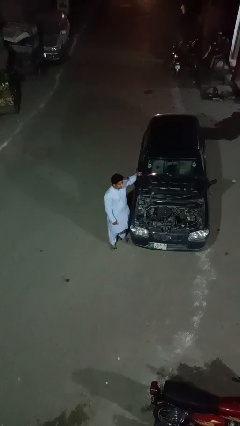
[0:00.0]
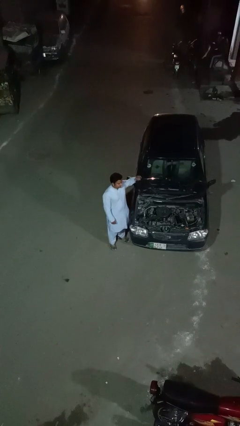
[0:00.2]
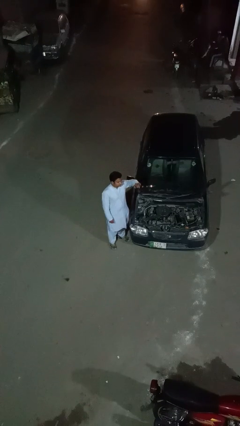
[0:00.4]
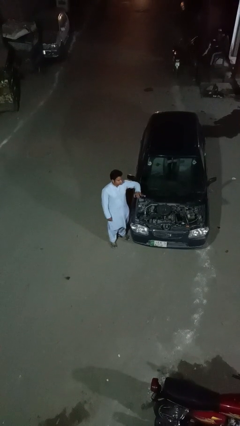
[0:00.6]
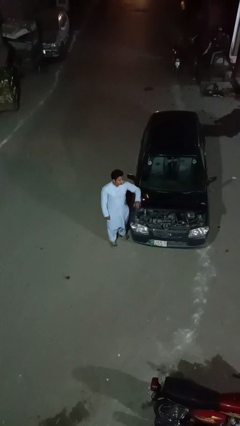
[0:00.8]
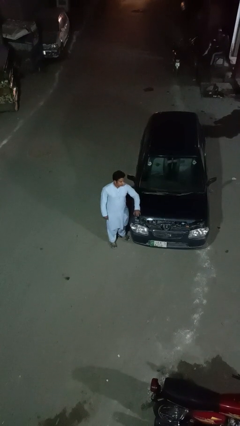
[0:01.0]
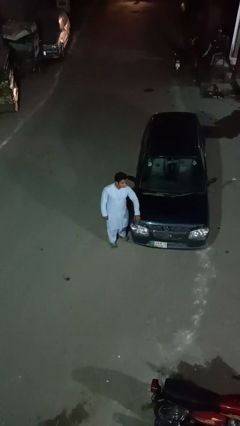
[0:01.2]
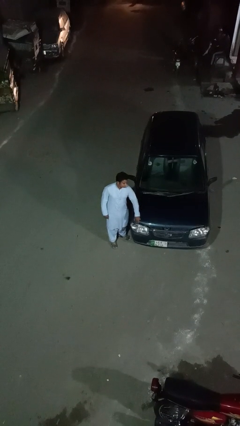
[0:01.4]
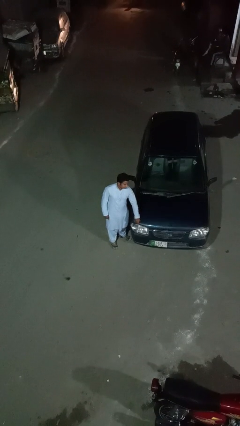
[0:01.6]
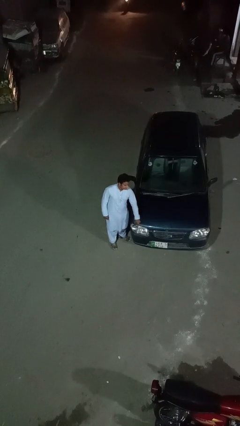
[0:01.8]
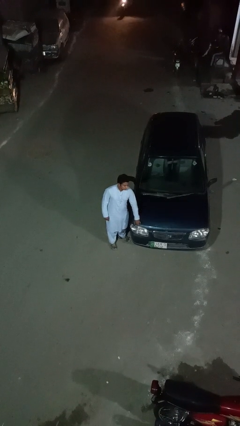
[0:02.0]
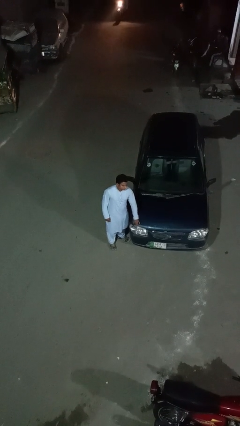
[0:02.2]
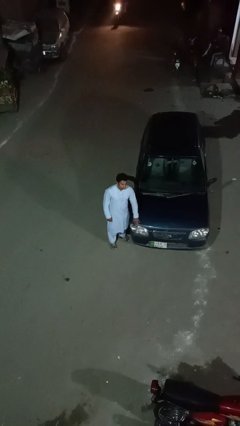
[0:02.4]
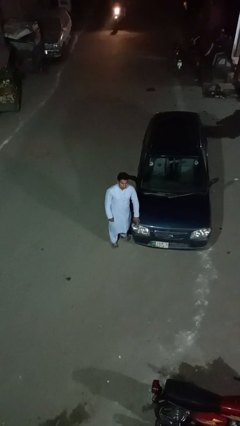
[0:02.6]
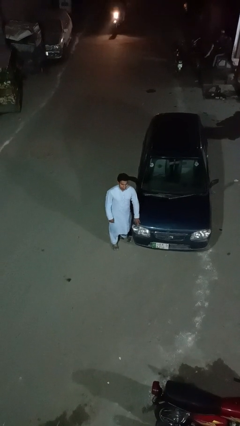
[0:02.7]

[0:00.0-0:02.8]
person closes car hood

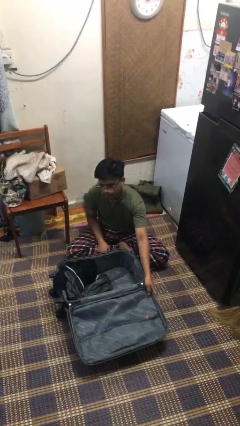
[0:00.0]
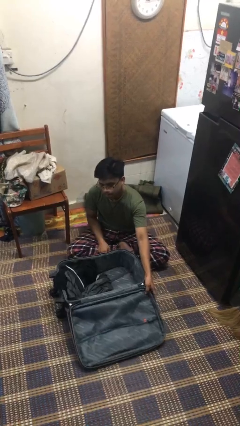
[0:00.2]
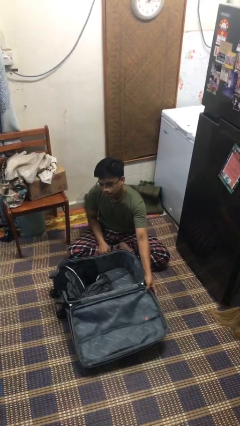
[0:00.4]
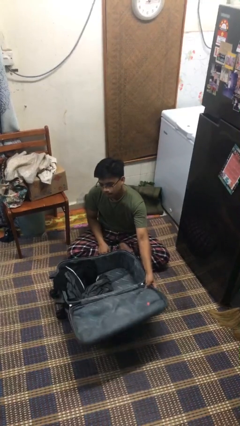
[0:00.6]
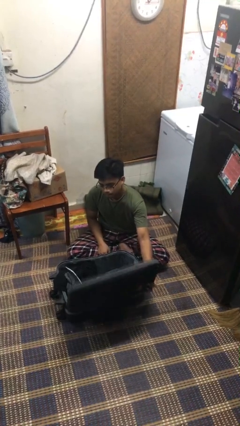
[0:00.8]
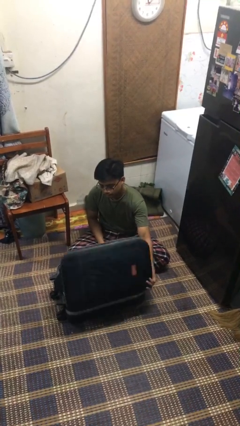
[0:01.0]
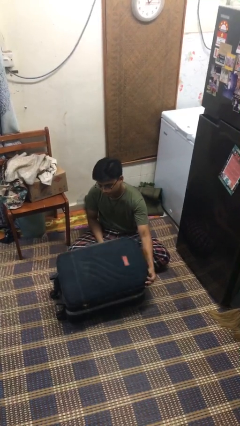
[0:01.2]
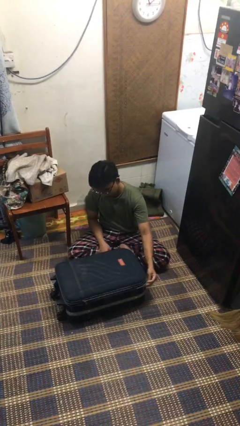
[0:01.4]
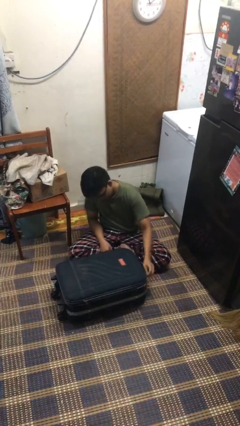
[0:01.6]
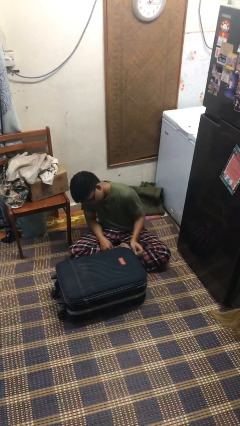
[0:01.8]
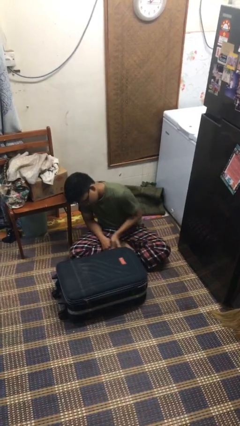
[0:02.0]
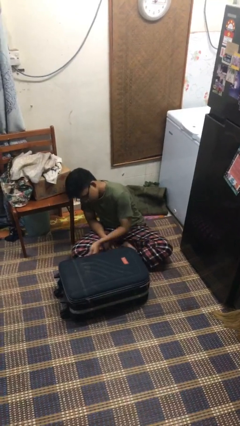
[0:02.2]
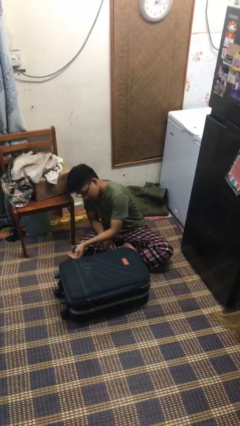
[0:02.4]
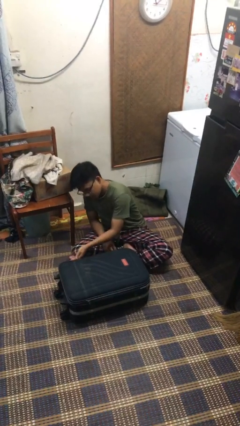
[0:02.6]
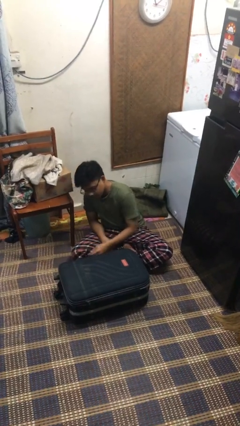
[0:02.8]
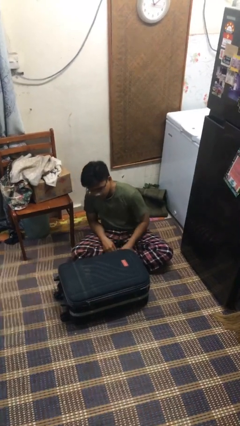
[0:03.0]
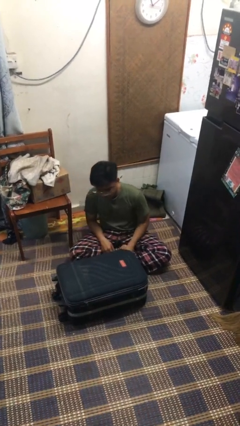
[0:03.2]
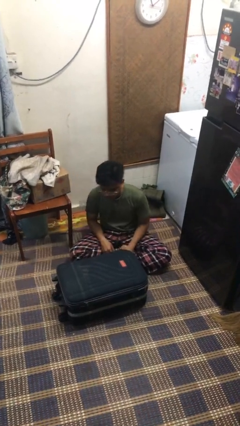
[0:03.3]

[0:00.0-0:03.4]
person closes suitcase

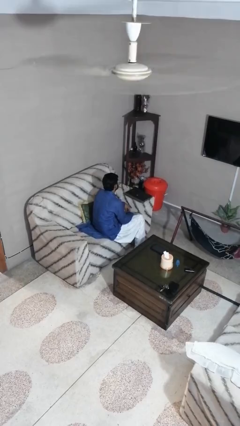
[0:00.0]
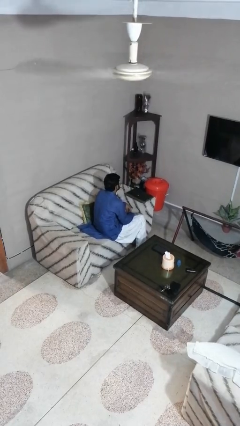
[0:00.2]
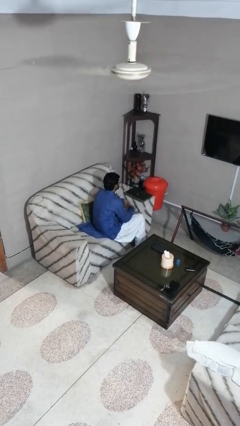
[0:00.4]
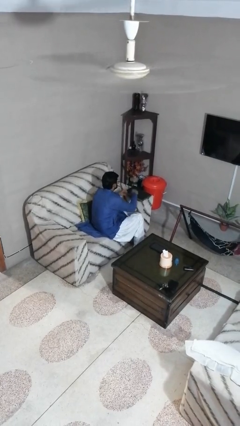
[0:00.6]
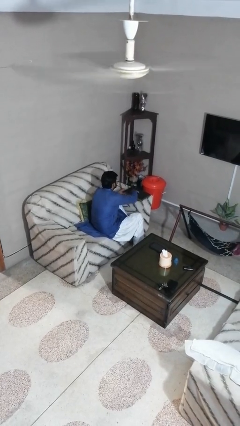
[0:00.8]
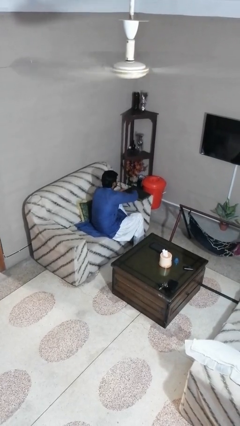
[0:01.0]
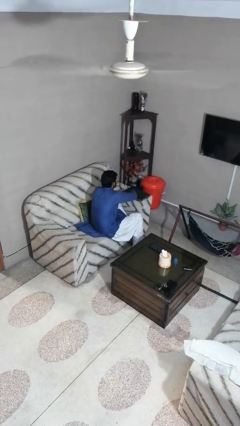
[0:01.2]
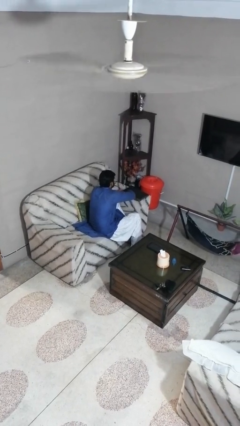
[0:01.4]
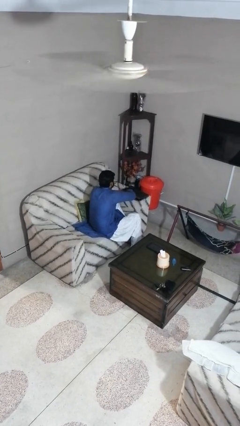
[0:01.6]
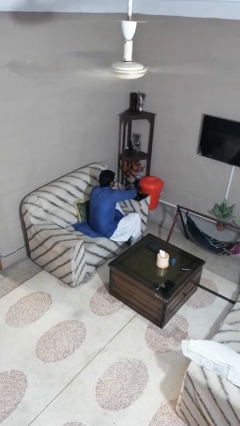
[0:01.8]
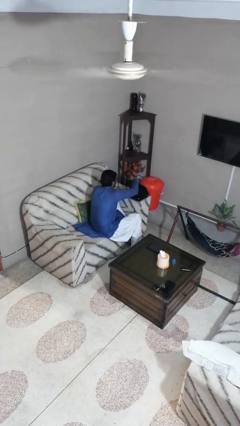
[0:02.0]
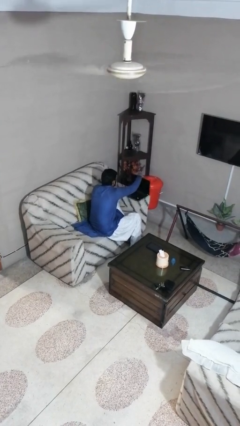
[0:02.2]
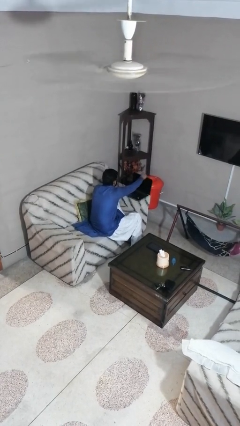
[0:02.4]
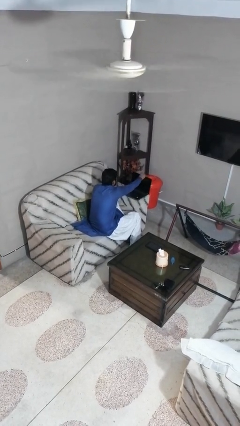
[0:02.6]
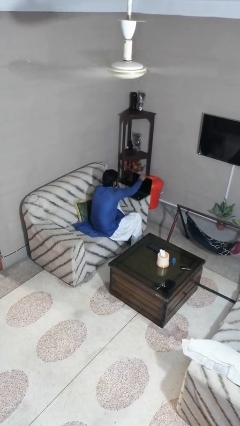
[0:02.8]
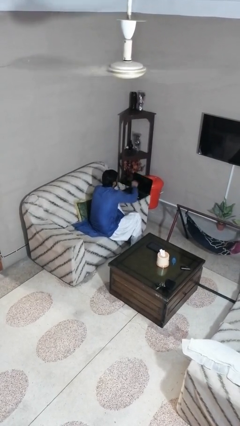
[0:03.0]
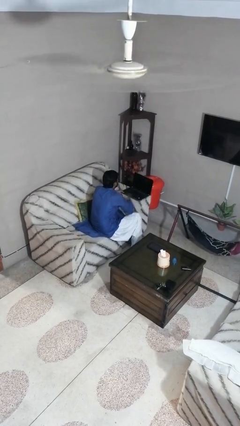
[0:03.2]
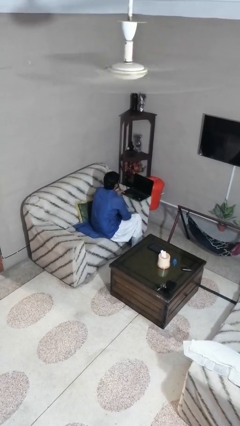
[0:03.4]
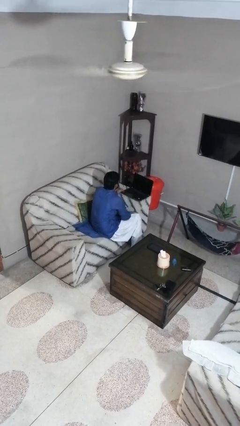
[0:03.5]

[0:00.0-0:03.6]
person opens laptop

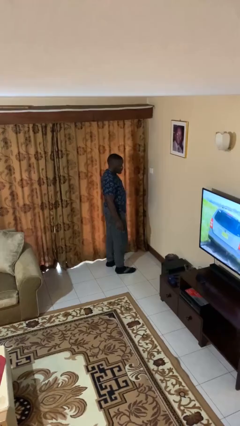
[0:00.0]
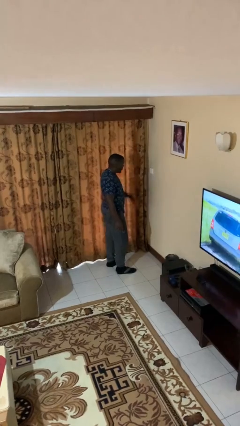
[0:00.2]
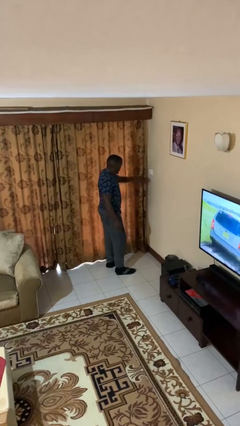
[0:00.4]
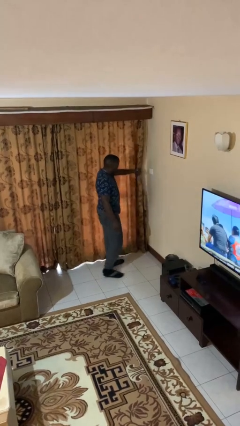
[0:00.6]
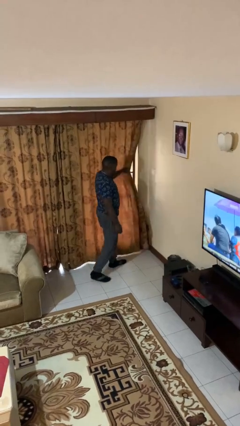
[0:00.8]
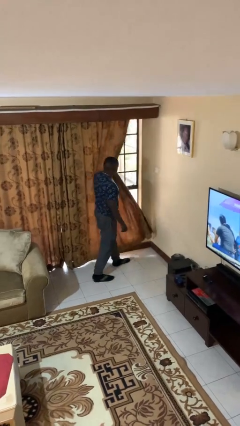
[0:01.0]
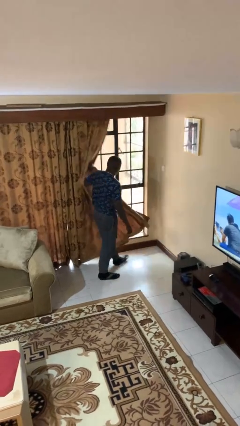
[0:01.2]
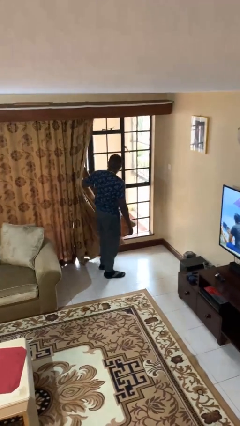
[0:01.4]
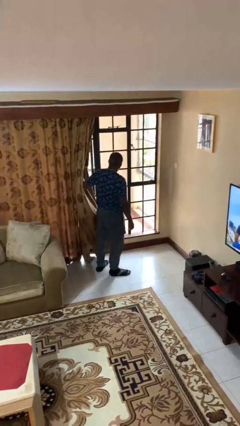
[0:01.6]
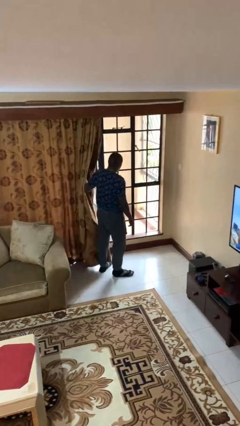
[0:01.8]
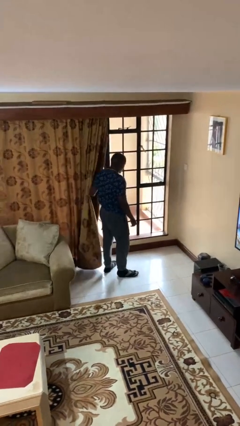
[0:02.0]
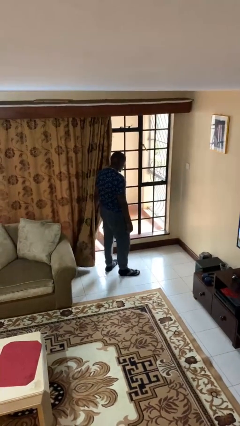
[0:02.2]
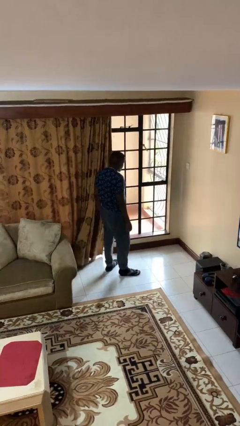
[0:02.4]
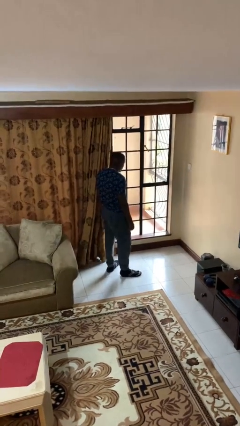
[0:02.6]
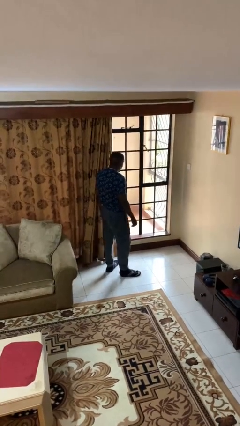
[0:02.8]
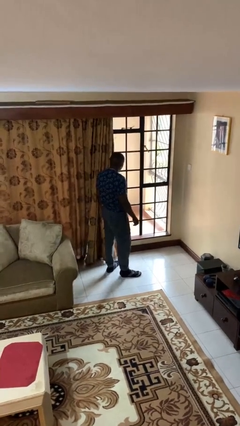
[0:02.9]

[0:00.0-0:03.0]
person opens curtains

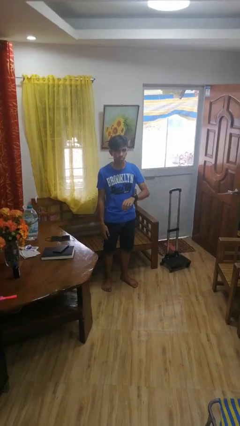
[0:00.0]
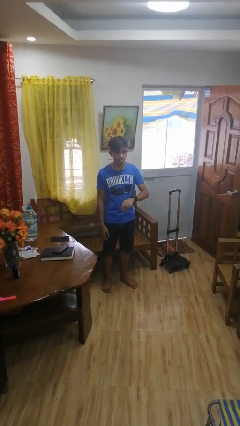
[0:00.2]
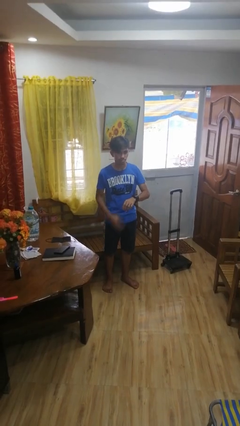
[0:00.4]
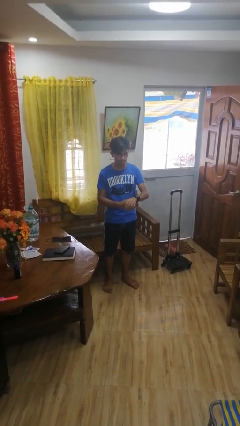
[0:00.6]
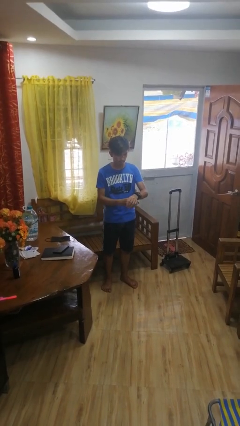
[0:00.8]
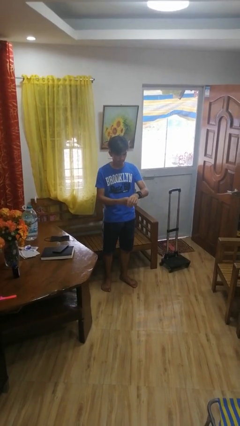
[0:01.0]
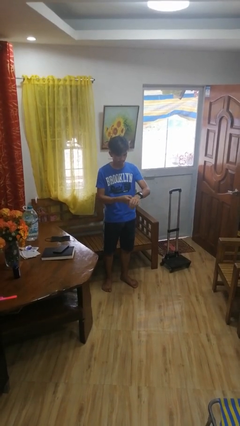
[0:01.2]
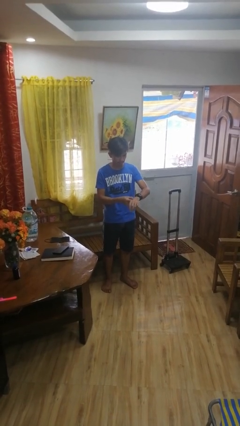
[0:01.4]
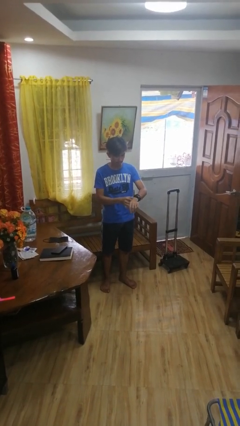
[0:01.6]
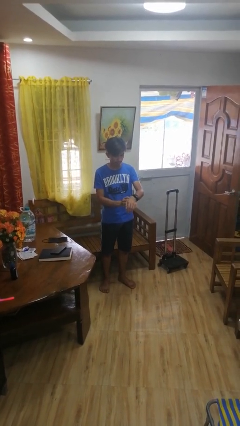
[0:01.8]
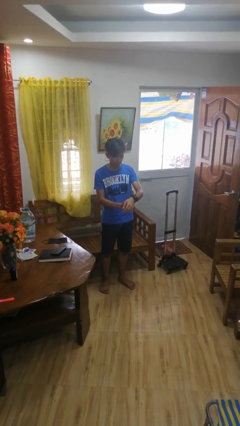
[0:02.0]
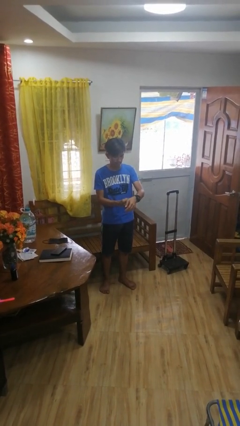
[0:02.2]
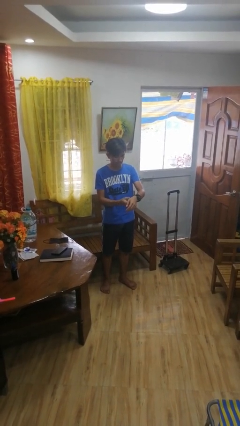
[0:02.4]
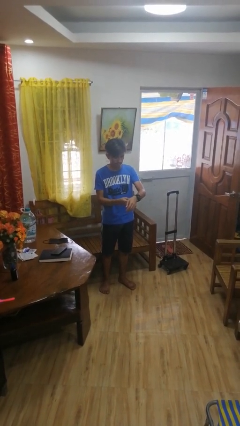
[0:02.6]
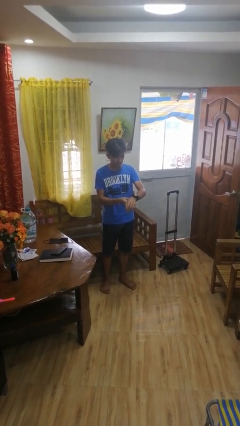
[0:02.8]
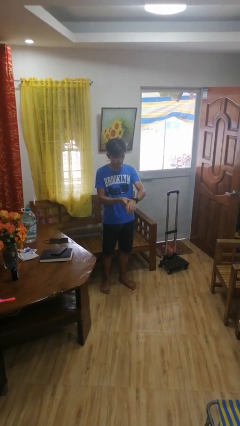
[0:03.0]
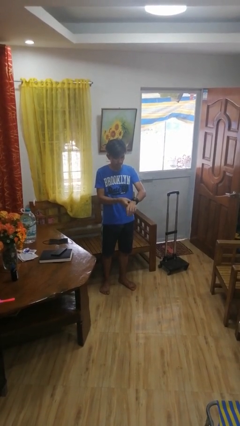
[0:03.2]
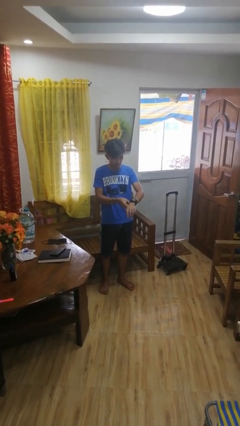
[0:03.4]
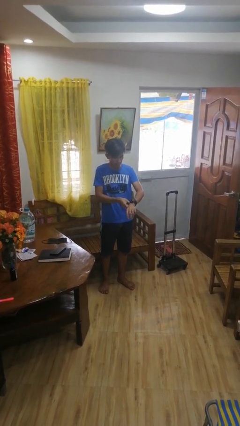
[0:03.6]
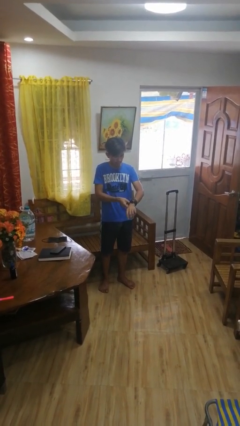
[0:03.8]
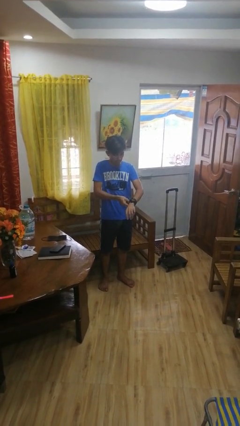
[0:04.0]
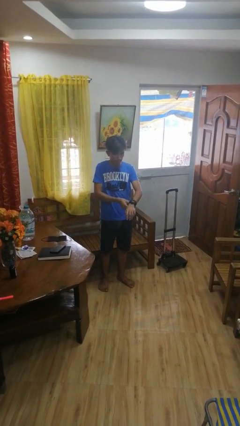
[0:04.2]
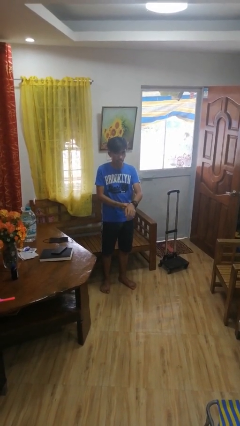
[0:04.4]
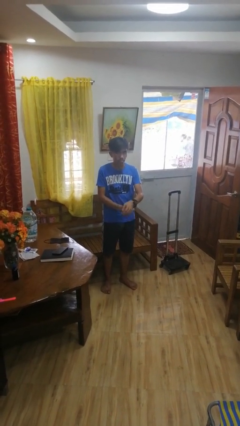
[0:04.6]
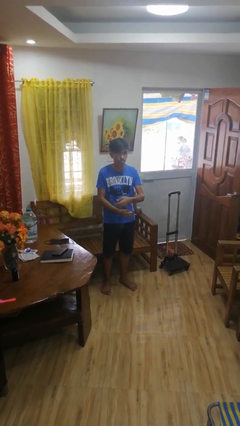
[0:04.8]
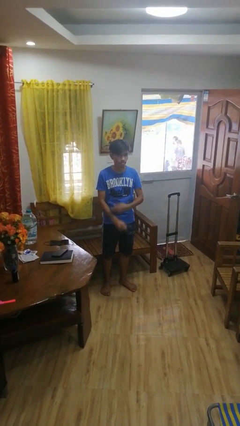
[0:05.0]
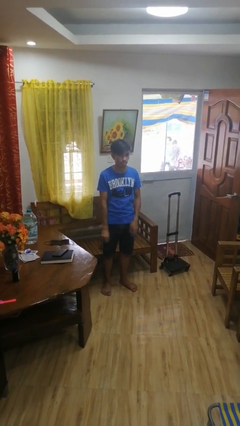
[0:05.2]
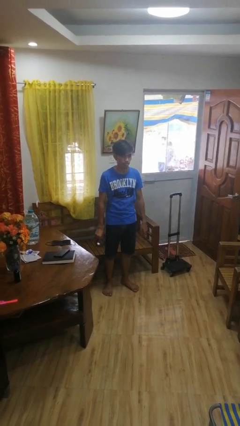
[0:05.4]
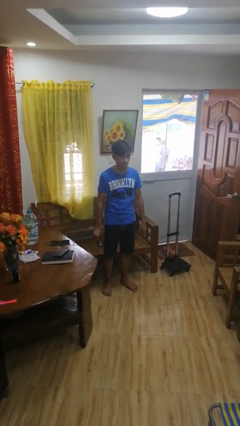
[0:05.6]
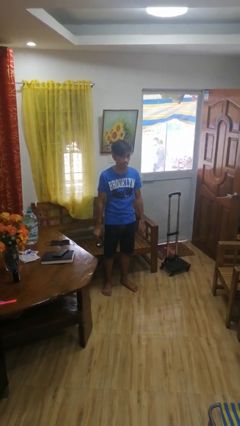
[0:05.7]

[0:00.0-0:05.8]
person takes off wristwatch
